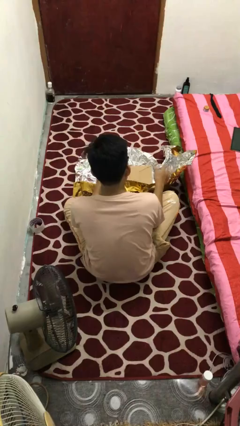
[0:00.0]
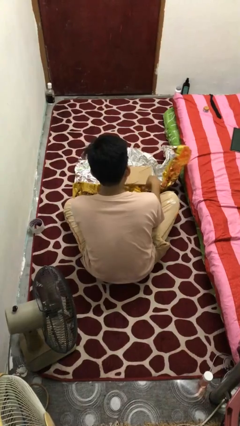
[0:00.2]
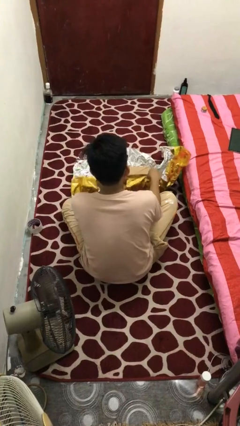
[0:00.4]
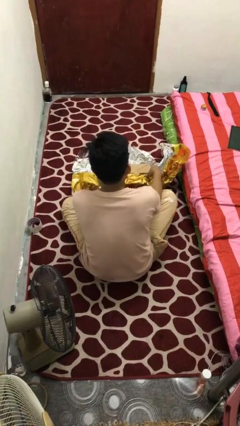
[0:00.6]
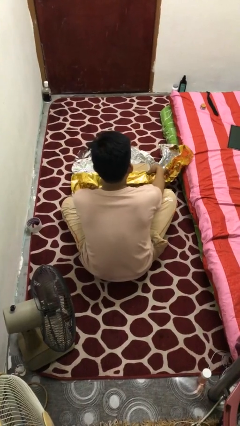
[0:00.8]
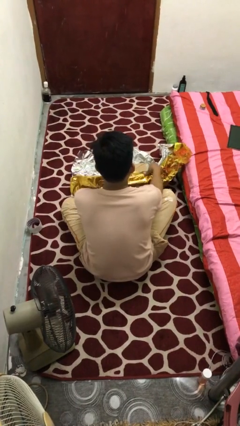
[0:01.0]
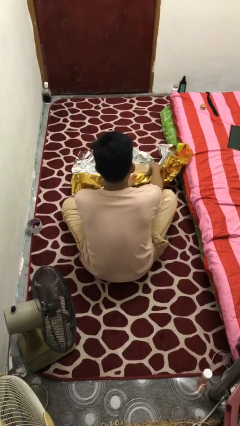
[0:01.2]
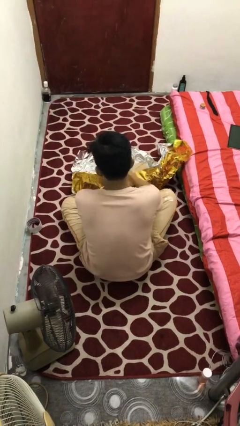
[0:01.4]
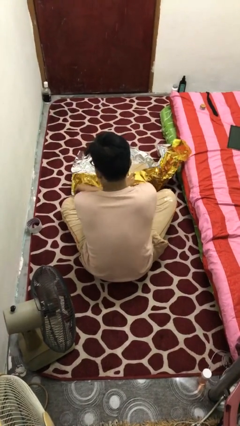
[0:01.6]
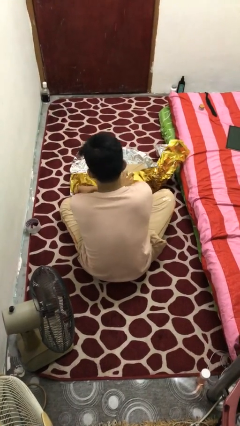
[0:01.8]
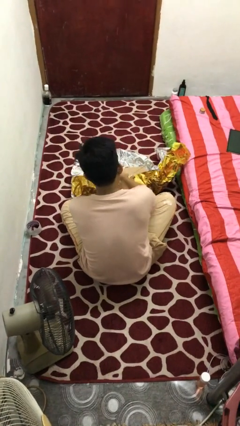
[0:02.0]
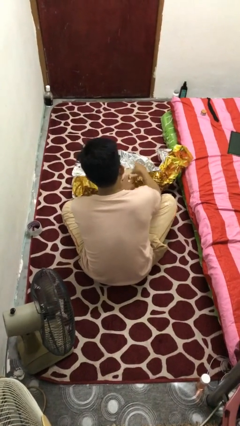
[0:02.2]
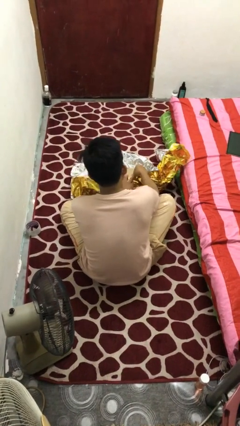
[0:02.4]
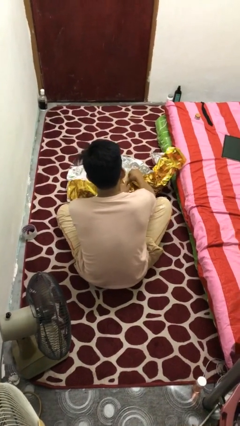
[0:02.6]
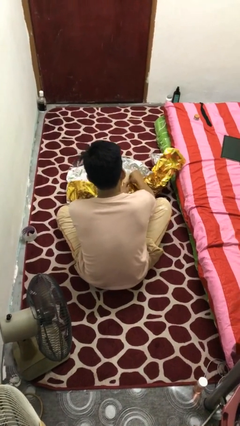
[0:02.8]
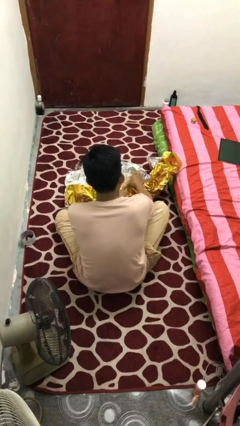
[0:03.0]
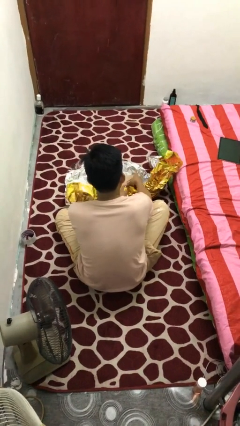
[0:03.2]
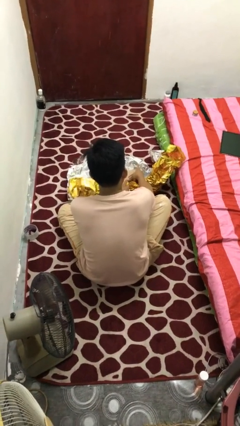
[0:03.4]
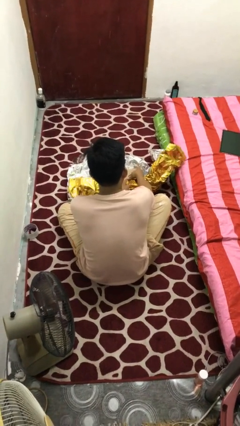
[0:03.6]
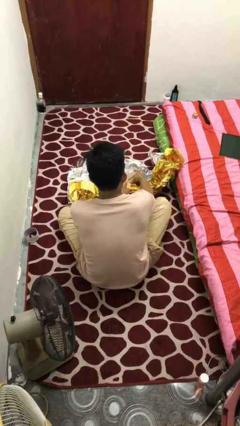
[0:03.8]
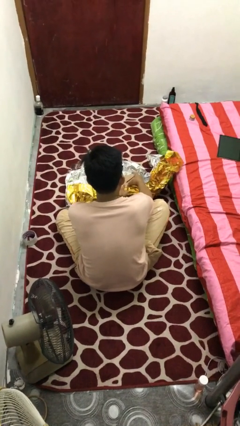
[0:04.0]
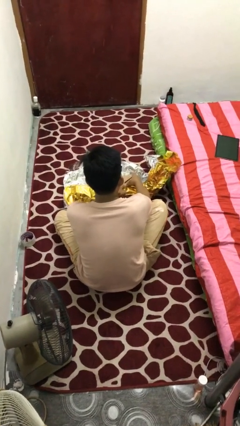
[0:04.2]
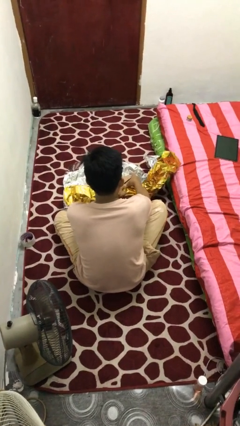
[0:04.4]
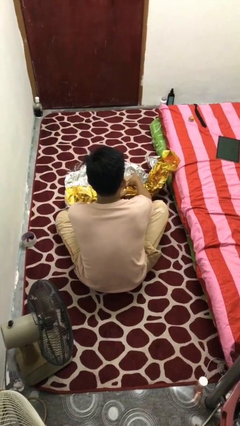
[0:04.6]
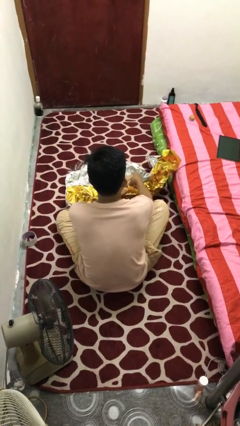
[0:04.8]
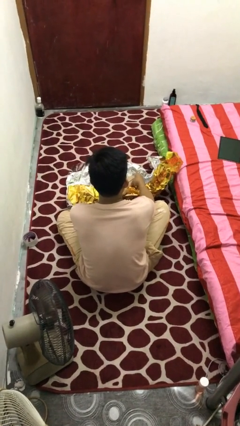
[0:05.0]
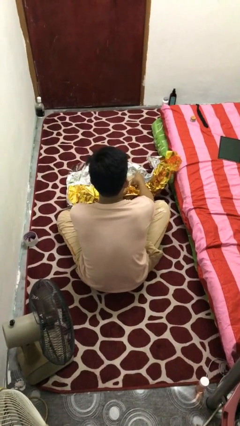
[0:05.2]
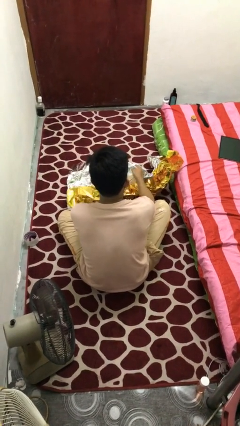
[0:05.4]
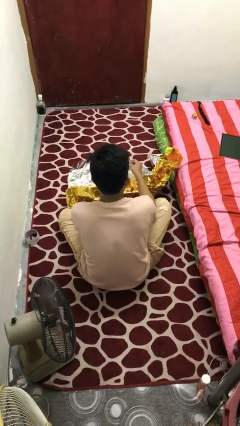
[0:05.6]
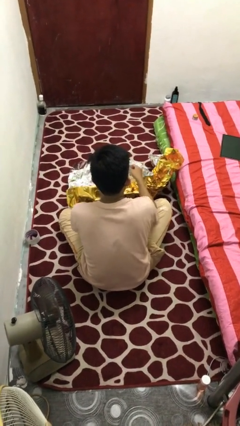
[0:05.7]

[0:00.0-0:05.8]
person wraps box

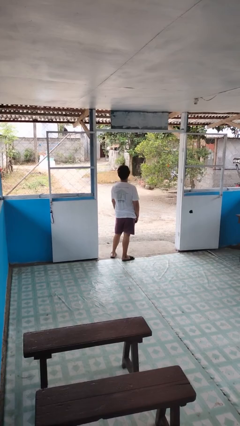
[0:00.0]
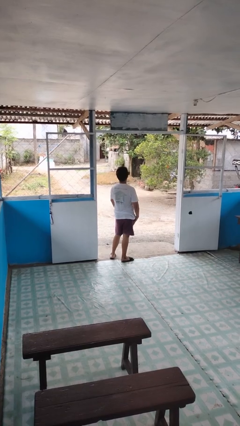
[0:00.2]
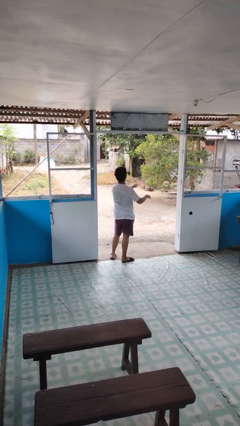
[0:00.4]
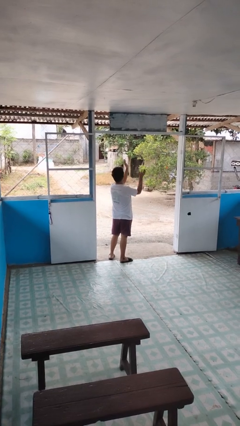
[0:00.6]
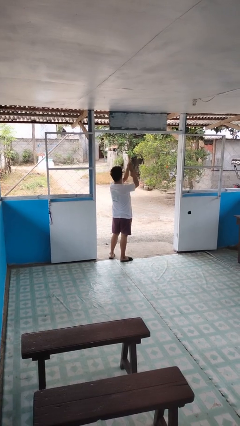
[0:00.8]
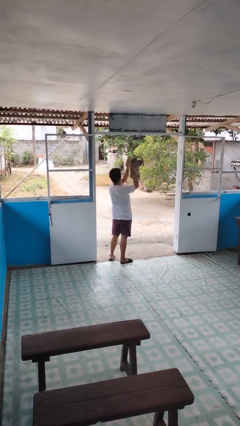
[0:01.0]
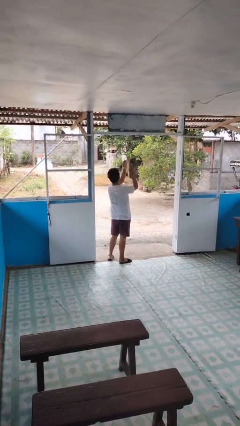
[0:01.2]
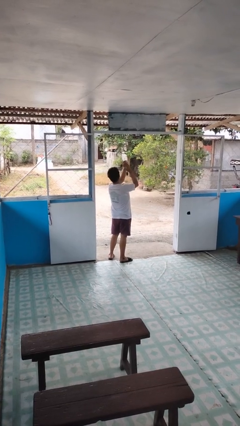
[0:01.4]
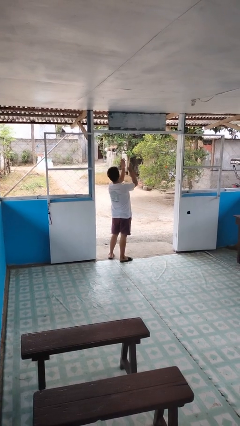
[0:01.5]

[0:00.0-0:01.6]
person claps hands

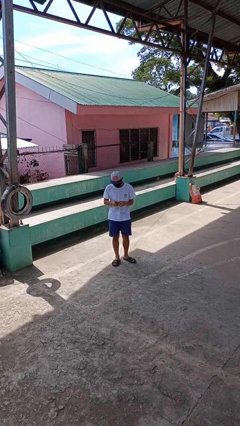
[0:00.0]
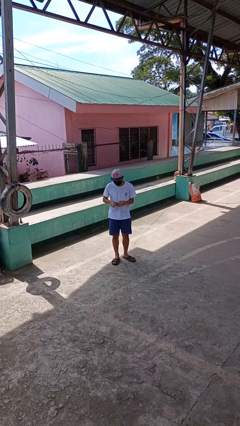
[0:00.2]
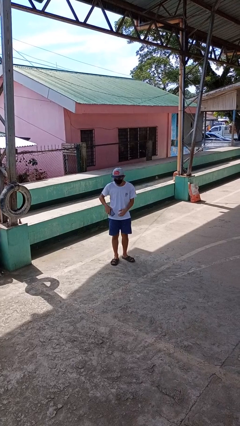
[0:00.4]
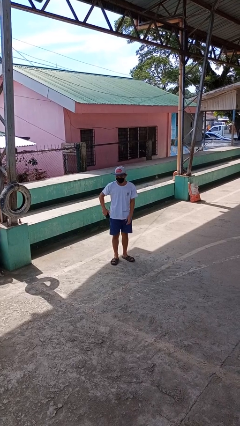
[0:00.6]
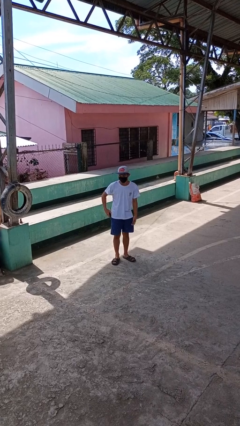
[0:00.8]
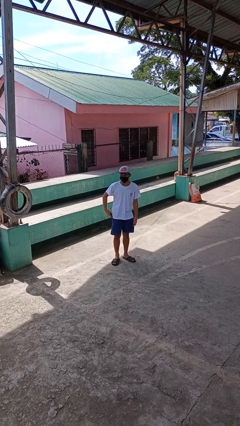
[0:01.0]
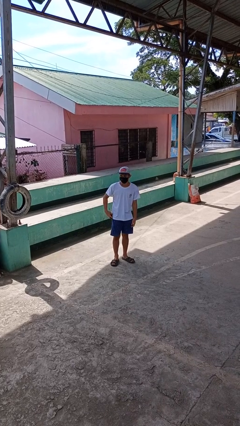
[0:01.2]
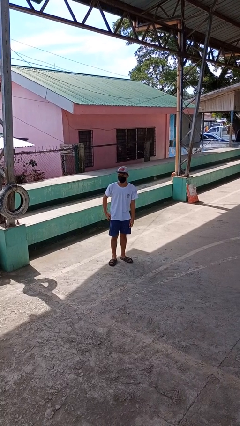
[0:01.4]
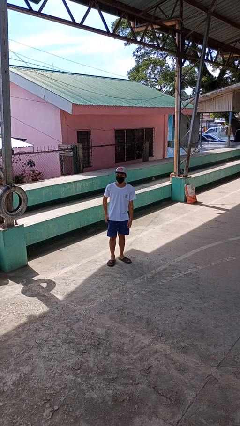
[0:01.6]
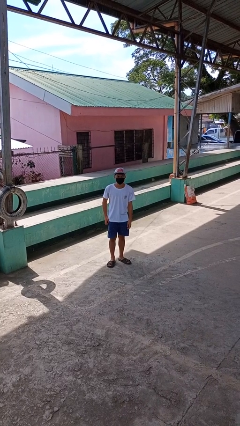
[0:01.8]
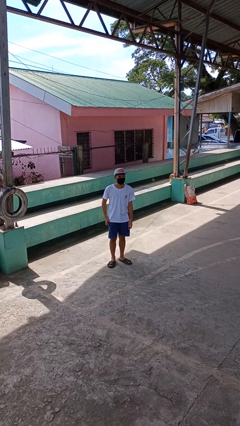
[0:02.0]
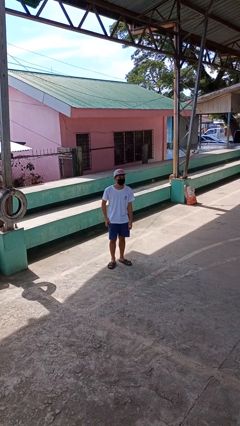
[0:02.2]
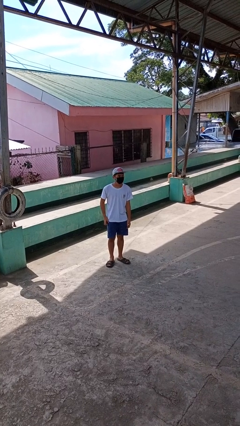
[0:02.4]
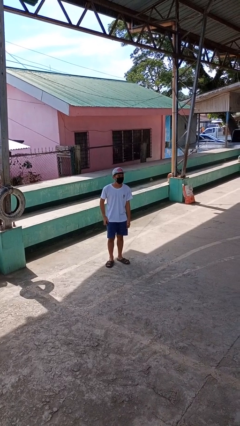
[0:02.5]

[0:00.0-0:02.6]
person puts phone into pocket

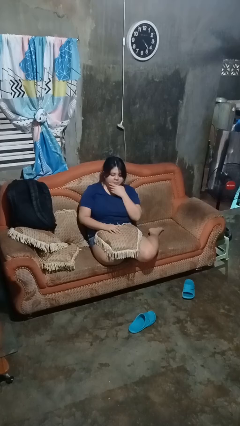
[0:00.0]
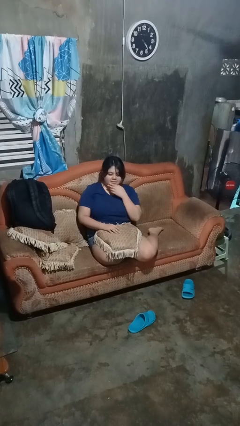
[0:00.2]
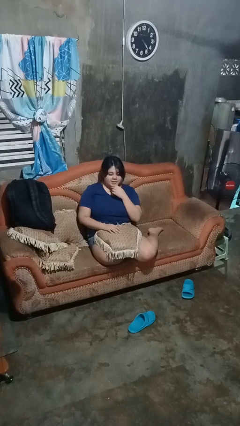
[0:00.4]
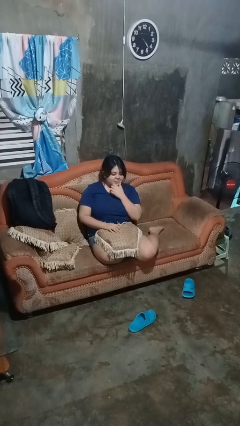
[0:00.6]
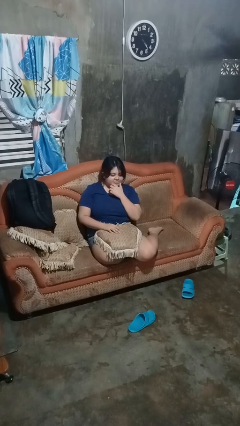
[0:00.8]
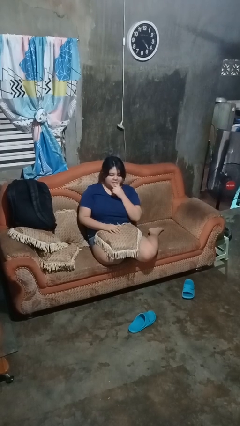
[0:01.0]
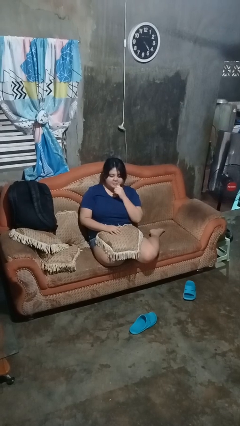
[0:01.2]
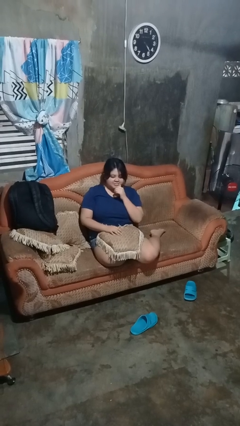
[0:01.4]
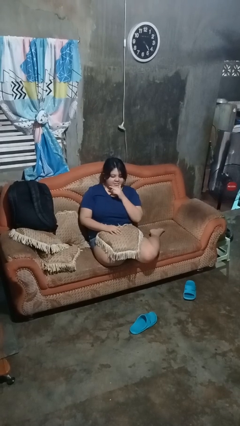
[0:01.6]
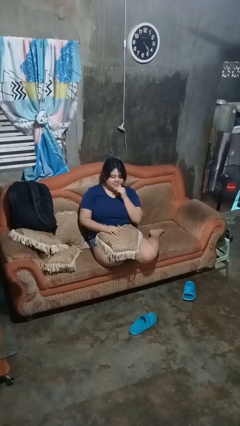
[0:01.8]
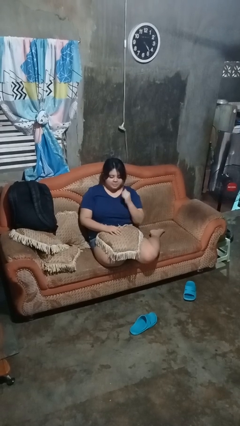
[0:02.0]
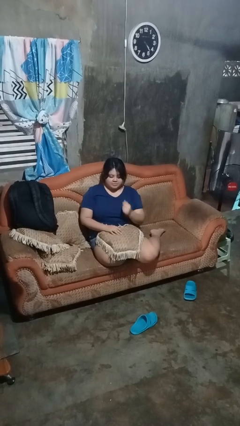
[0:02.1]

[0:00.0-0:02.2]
person strokes chin

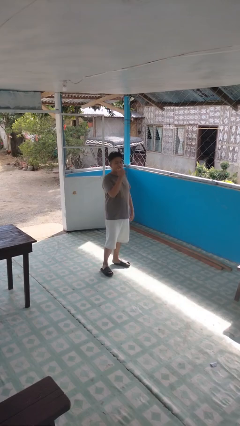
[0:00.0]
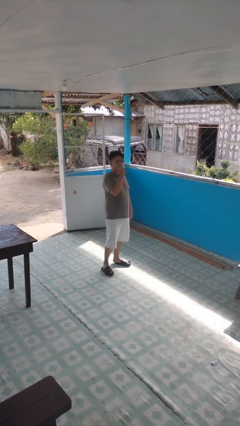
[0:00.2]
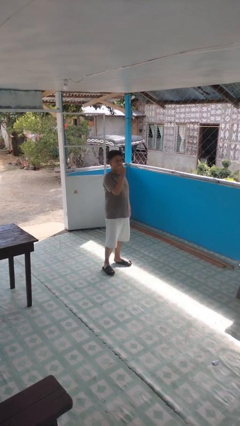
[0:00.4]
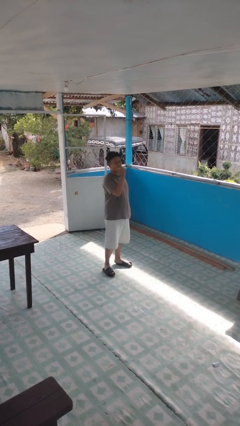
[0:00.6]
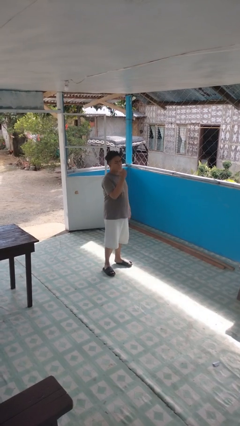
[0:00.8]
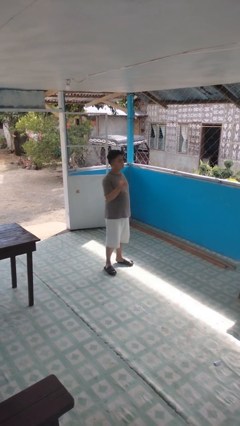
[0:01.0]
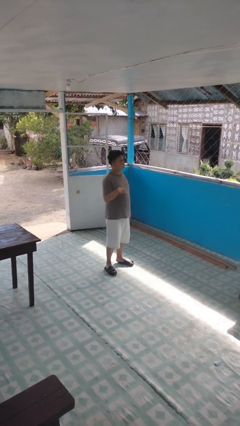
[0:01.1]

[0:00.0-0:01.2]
person eats apple

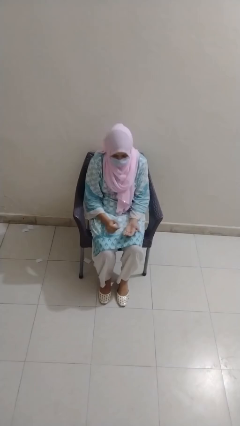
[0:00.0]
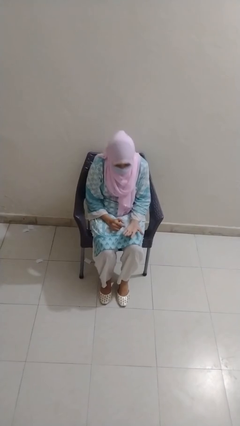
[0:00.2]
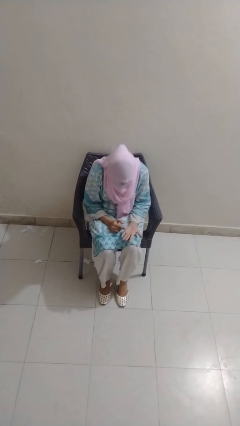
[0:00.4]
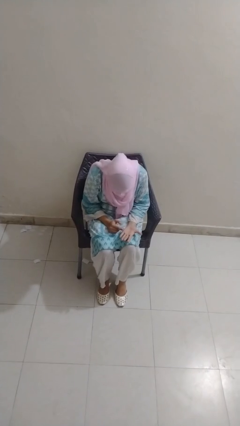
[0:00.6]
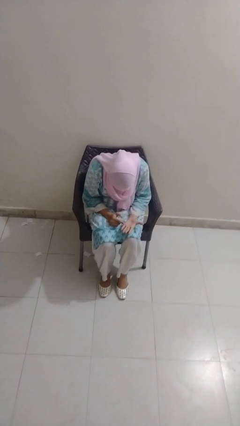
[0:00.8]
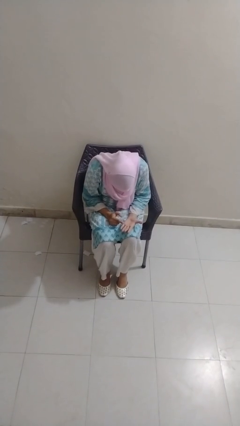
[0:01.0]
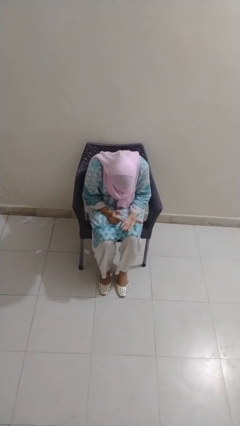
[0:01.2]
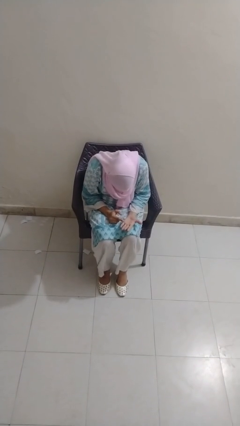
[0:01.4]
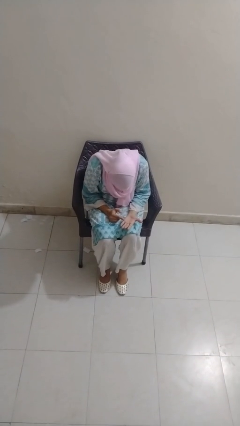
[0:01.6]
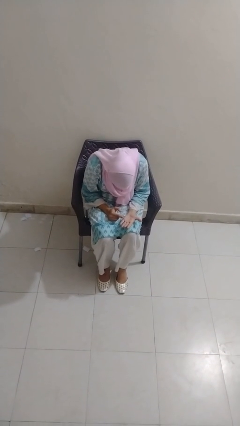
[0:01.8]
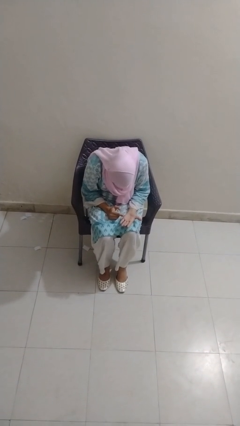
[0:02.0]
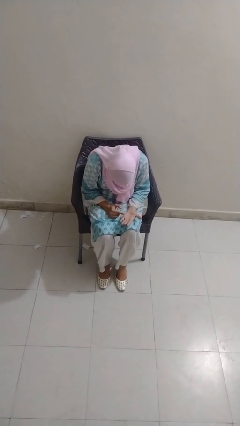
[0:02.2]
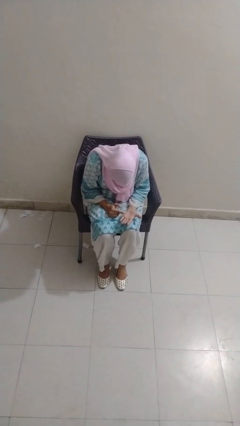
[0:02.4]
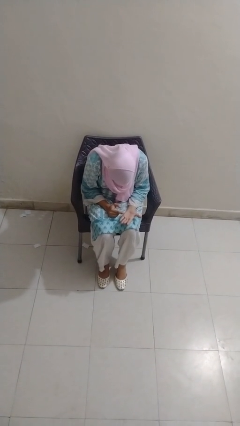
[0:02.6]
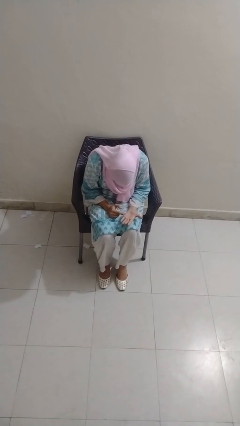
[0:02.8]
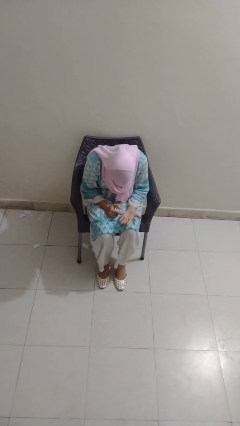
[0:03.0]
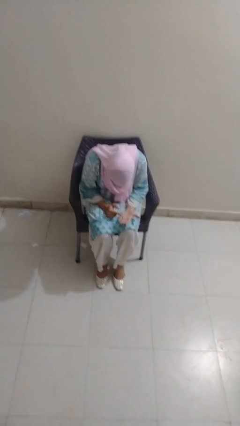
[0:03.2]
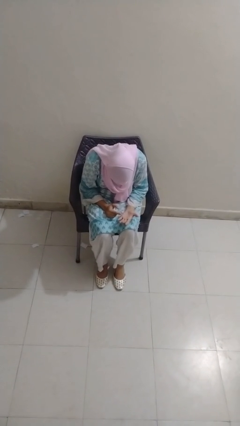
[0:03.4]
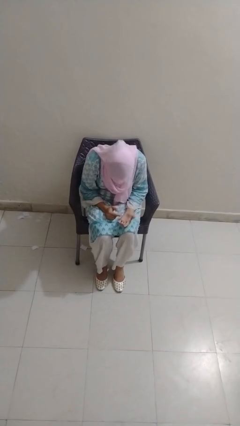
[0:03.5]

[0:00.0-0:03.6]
person looks at hands in lap

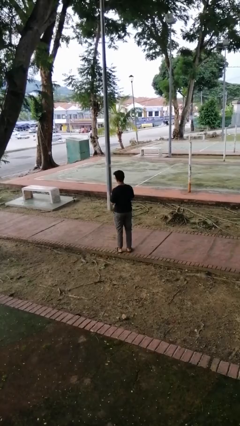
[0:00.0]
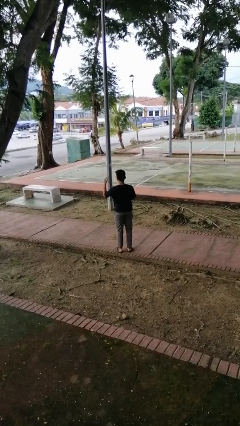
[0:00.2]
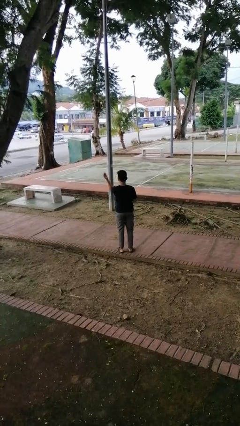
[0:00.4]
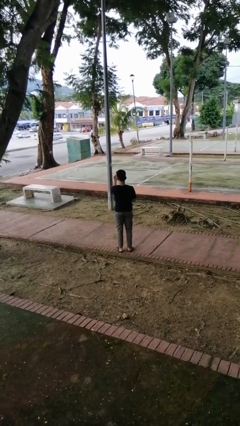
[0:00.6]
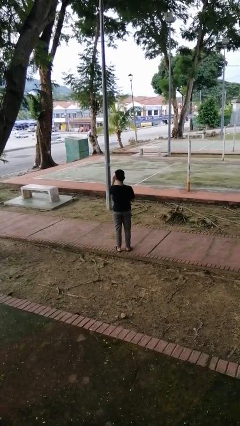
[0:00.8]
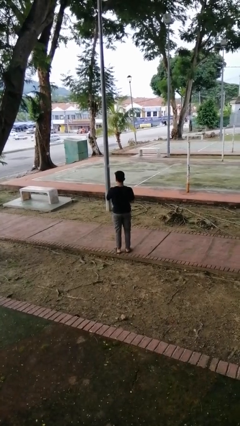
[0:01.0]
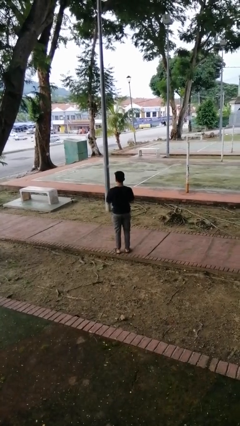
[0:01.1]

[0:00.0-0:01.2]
person karate chop
